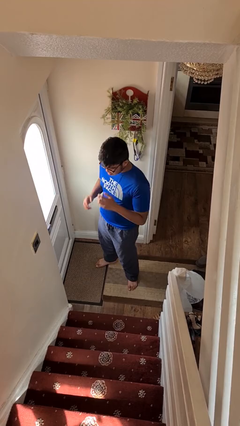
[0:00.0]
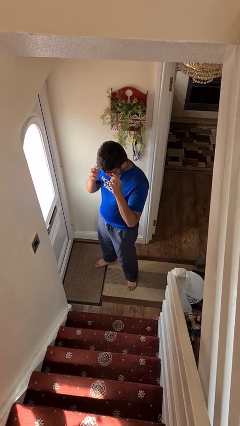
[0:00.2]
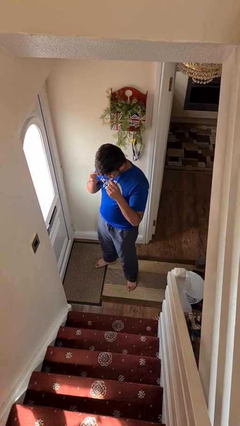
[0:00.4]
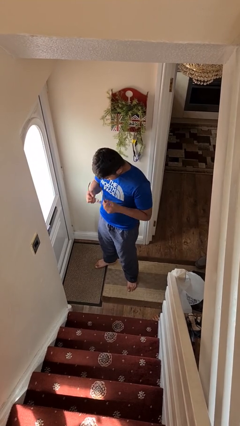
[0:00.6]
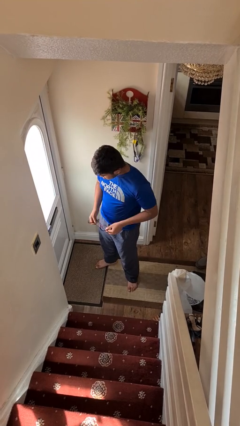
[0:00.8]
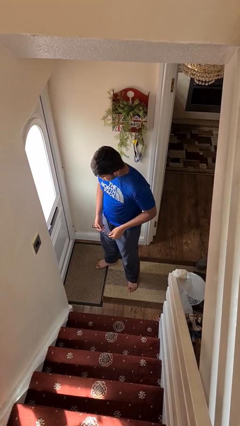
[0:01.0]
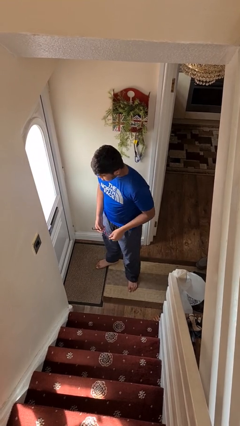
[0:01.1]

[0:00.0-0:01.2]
person takes off glasses

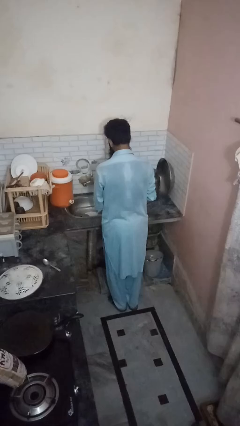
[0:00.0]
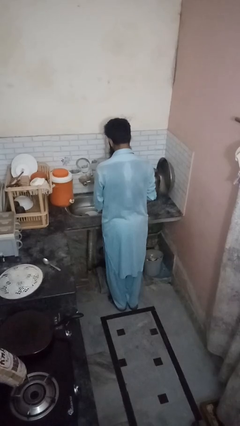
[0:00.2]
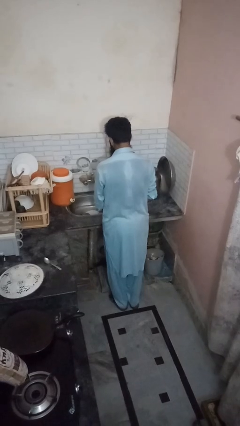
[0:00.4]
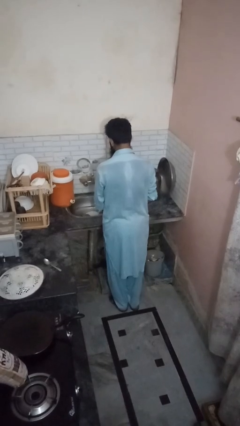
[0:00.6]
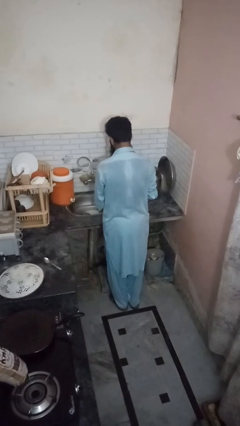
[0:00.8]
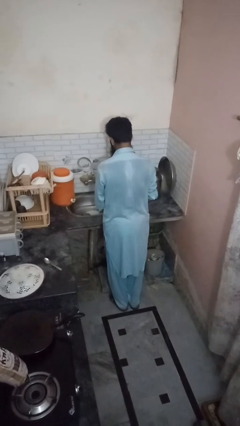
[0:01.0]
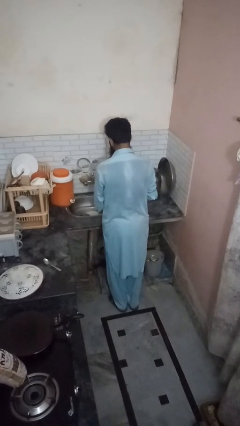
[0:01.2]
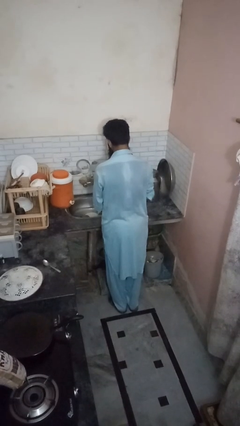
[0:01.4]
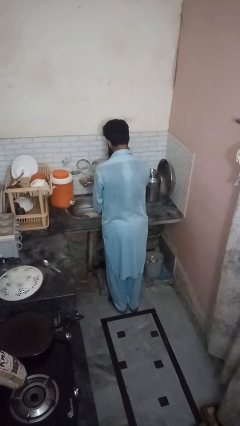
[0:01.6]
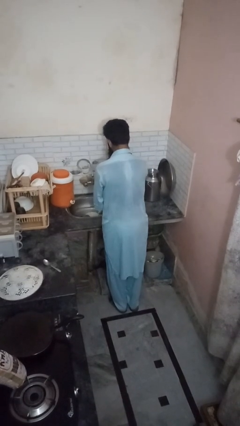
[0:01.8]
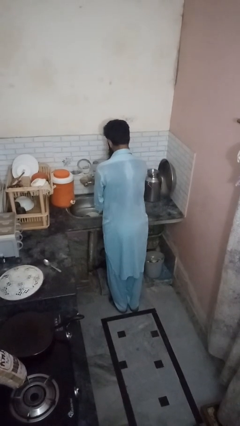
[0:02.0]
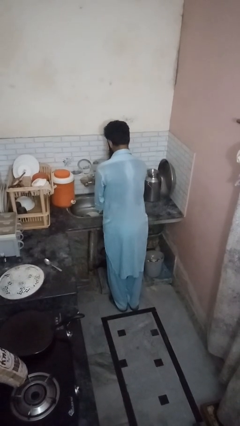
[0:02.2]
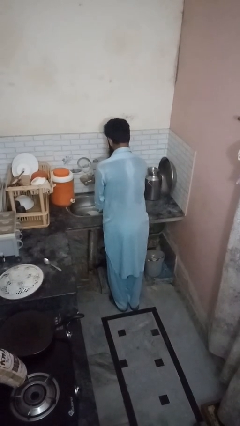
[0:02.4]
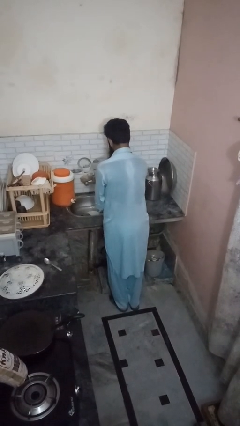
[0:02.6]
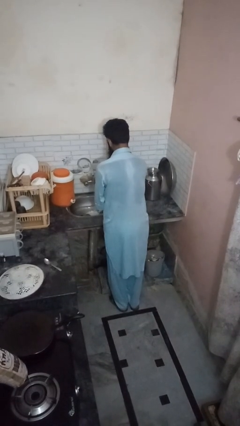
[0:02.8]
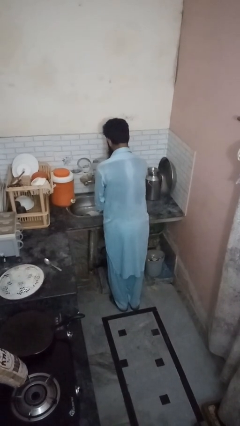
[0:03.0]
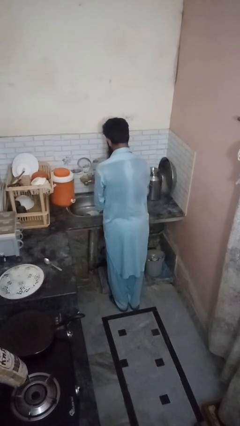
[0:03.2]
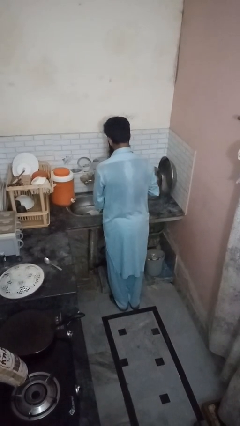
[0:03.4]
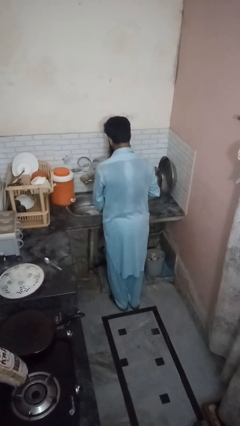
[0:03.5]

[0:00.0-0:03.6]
person closes dishwasher

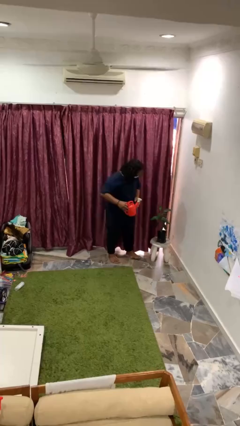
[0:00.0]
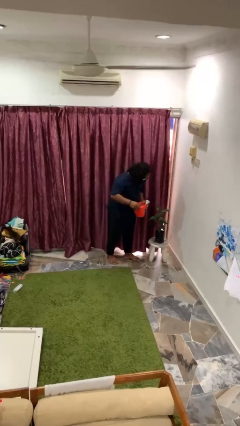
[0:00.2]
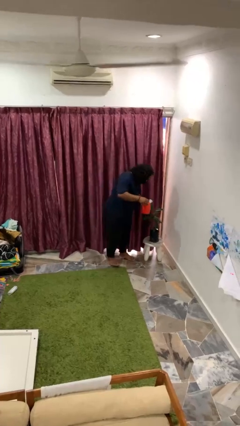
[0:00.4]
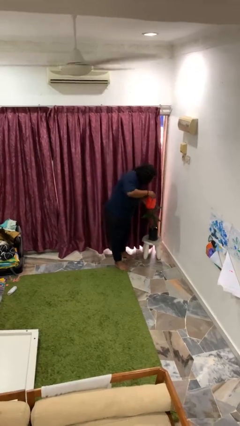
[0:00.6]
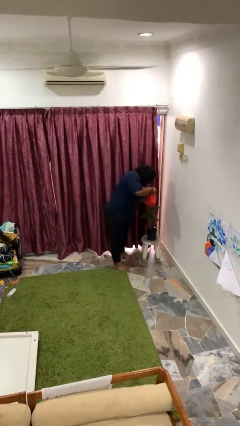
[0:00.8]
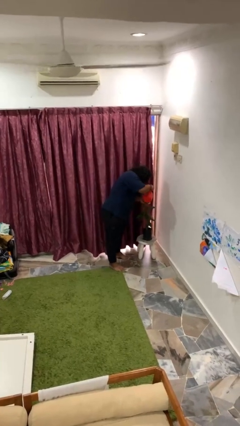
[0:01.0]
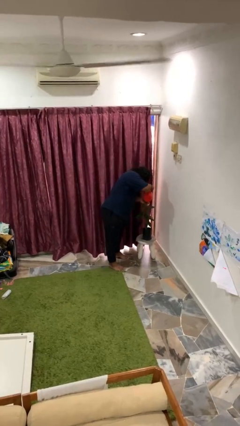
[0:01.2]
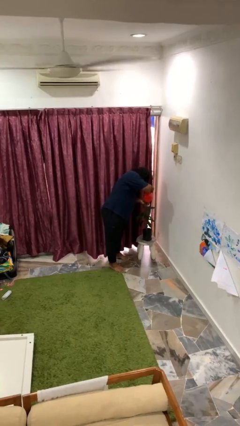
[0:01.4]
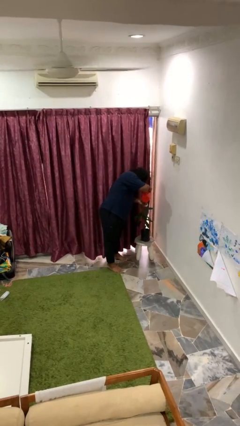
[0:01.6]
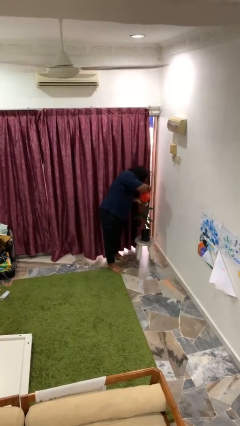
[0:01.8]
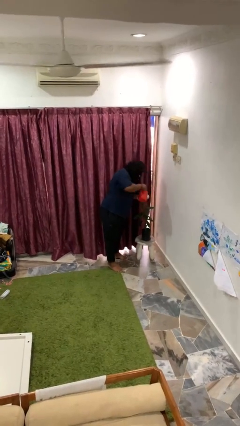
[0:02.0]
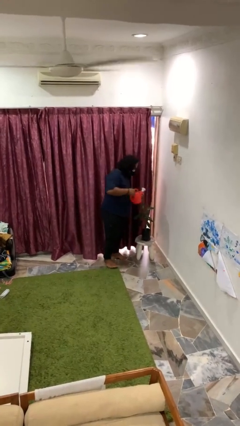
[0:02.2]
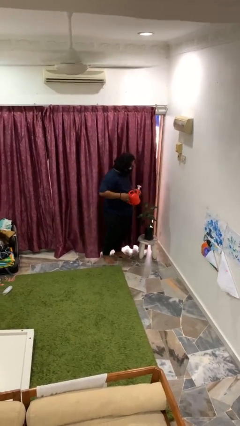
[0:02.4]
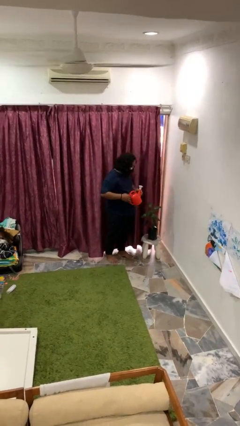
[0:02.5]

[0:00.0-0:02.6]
person waters houseplant

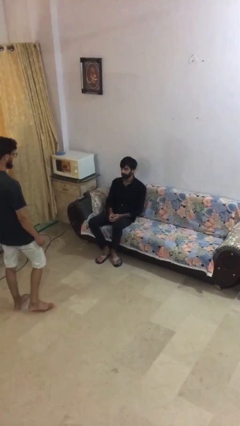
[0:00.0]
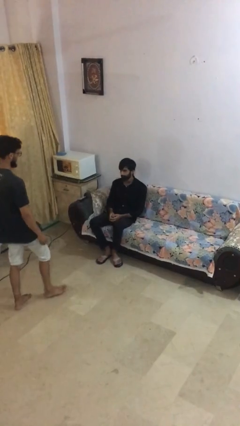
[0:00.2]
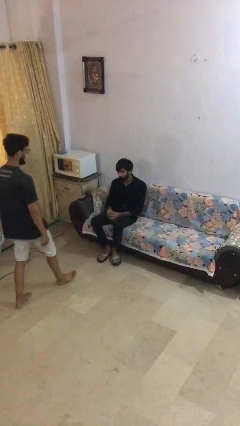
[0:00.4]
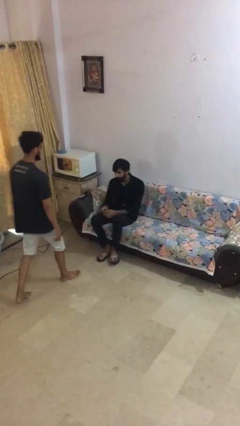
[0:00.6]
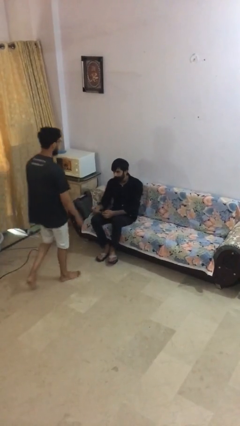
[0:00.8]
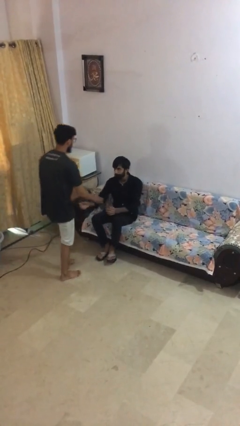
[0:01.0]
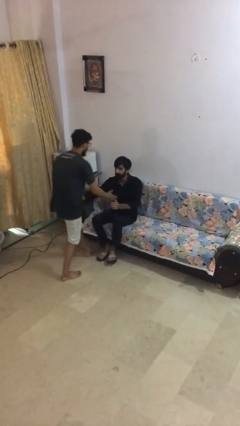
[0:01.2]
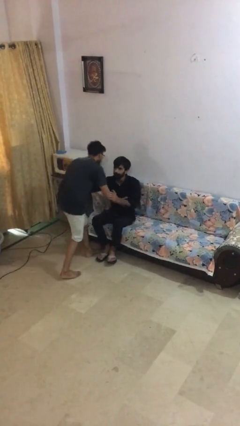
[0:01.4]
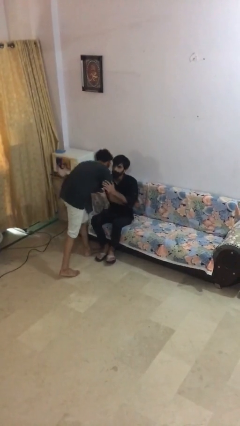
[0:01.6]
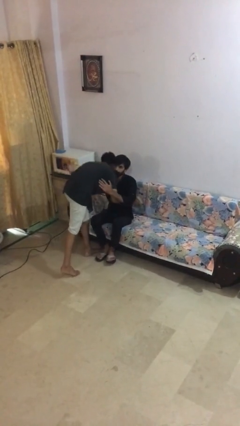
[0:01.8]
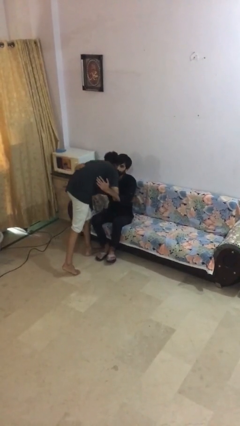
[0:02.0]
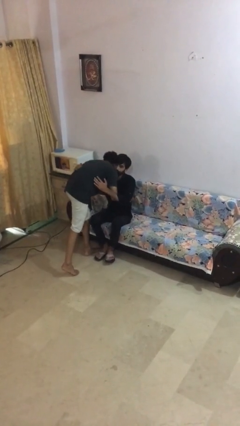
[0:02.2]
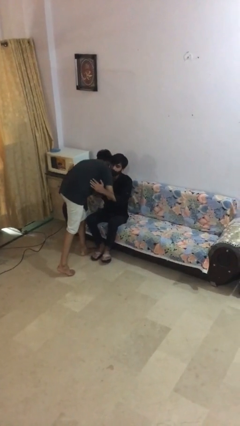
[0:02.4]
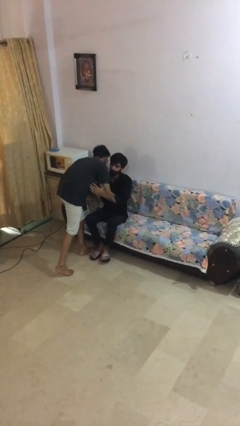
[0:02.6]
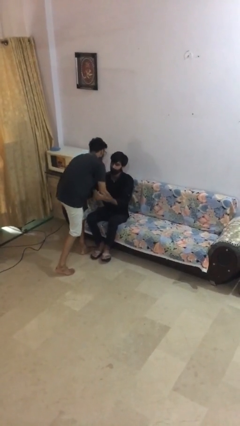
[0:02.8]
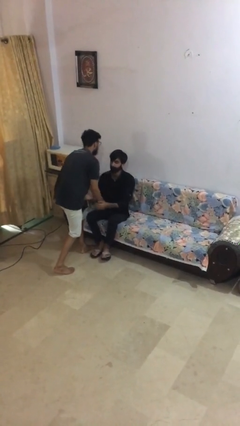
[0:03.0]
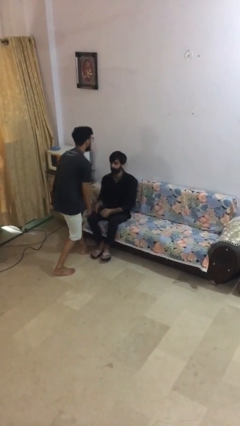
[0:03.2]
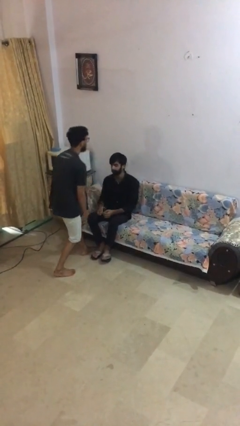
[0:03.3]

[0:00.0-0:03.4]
person embraces person

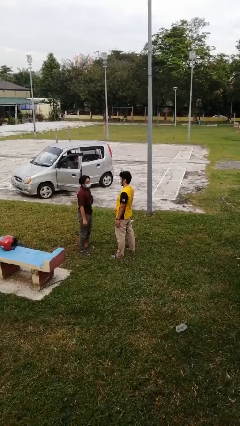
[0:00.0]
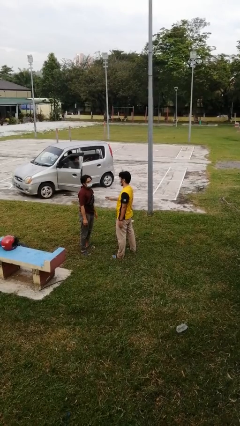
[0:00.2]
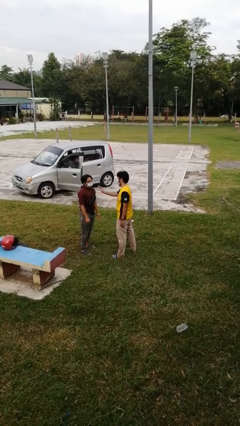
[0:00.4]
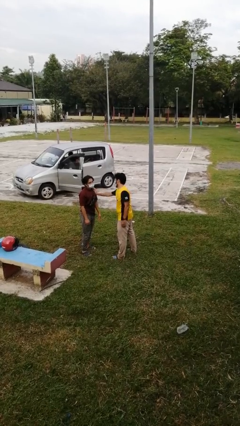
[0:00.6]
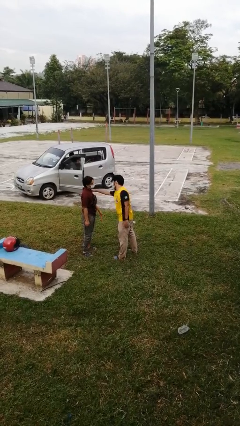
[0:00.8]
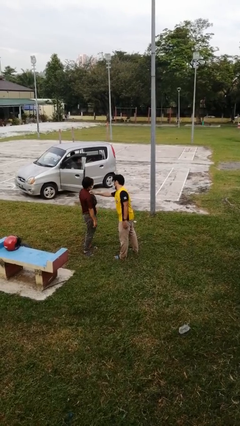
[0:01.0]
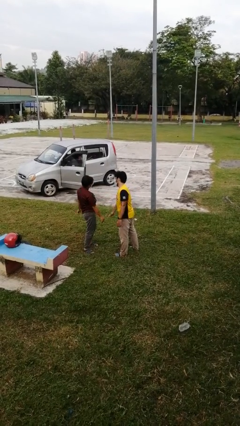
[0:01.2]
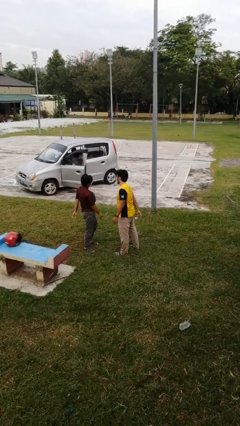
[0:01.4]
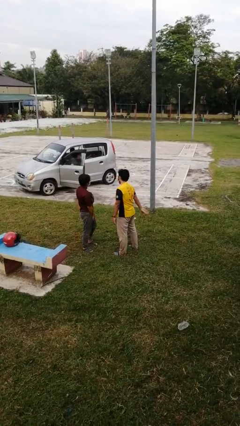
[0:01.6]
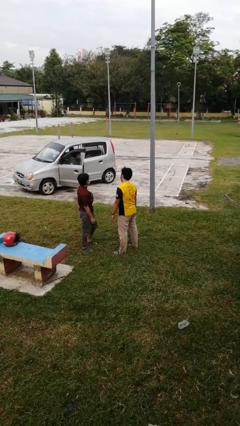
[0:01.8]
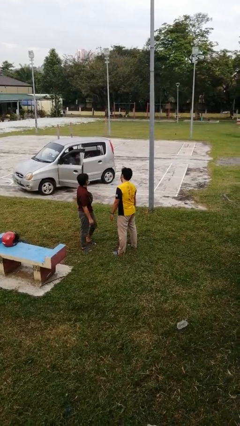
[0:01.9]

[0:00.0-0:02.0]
person shoves person

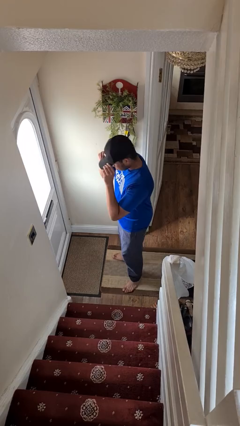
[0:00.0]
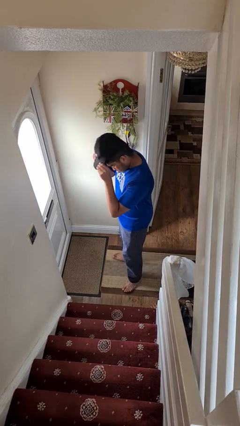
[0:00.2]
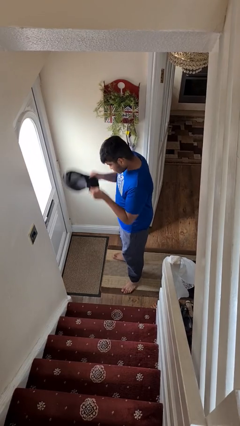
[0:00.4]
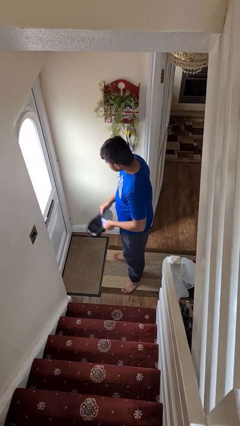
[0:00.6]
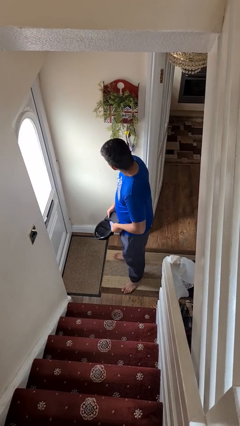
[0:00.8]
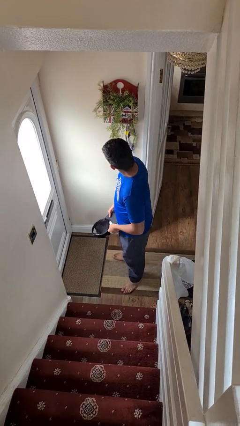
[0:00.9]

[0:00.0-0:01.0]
person takes off hat

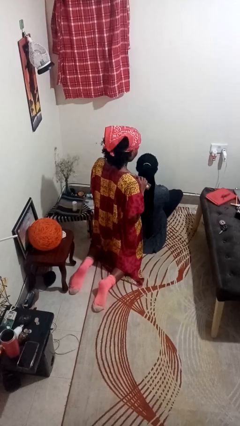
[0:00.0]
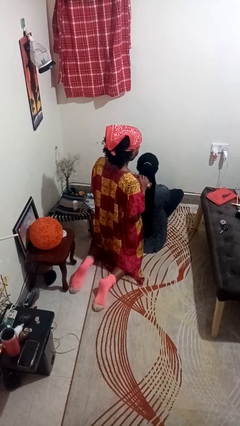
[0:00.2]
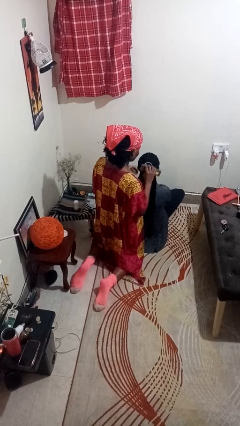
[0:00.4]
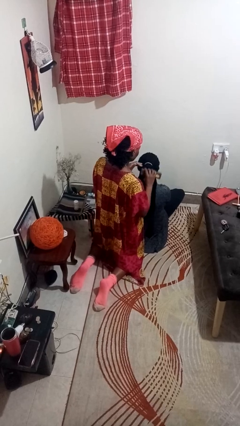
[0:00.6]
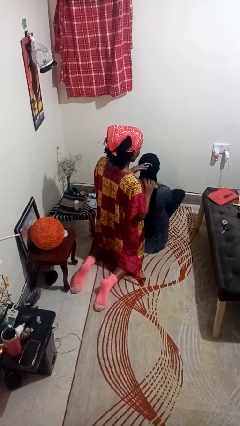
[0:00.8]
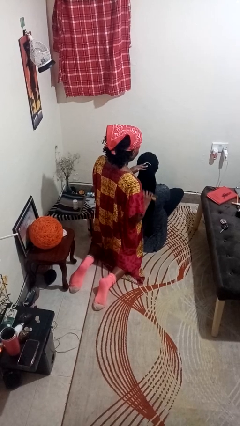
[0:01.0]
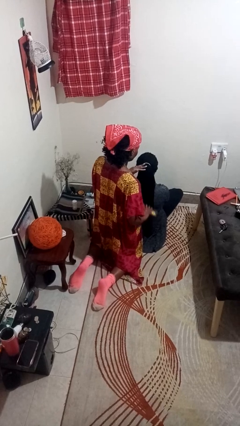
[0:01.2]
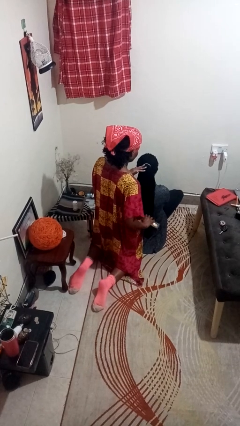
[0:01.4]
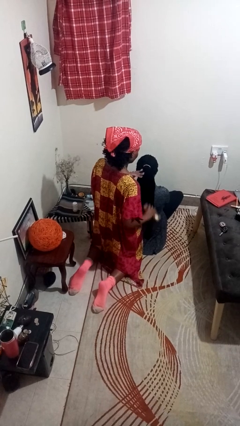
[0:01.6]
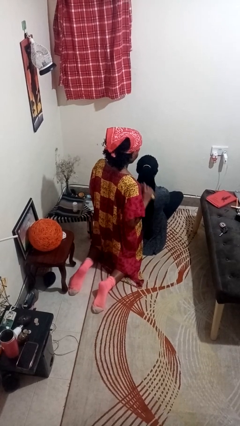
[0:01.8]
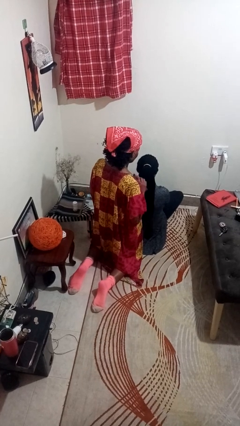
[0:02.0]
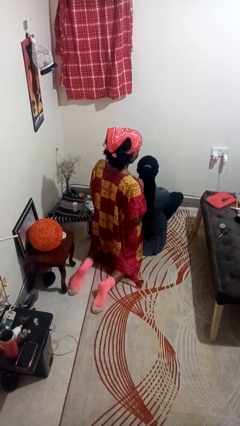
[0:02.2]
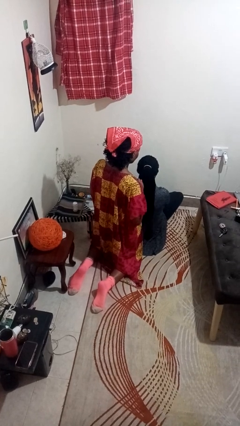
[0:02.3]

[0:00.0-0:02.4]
person brushes hair of person

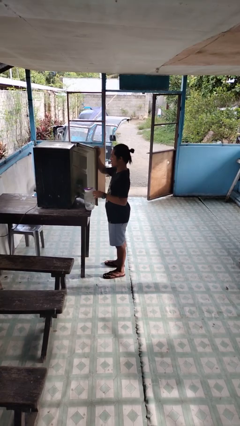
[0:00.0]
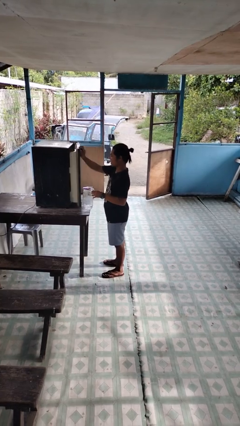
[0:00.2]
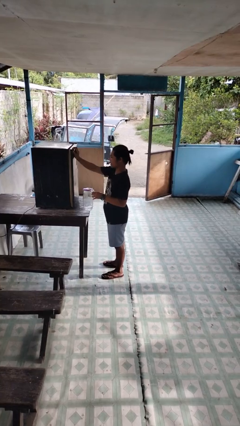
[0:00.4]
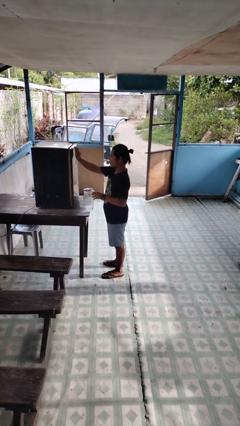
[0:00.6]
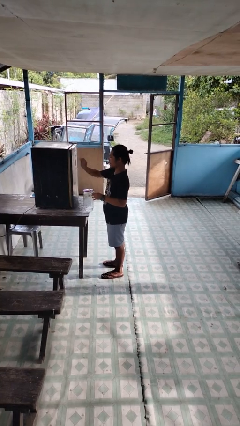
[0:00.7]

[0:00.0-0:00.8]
person closes refrigerator
